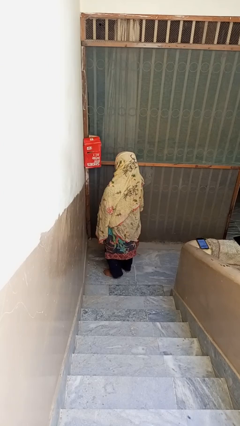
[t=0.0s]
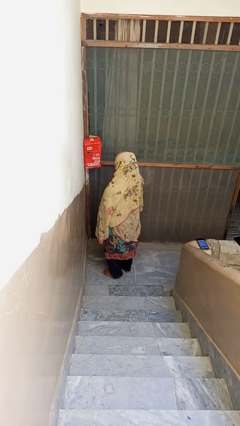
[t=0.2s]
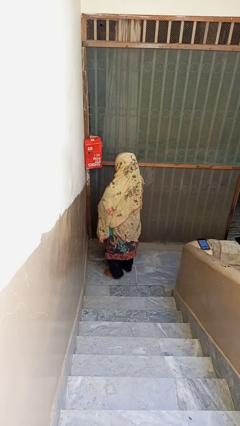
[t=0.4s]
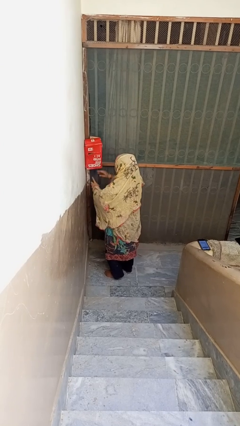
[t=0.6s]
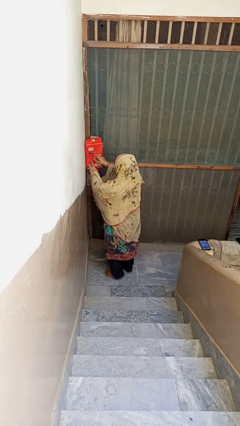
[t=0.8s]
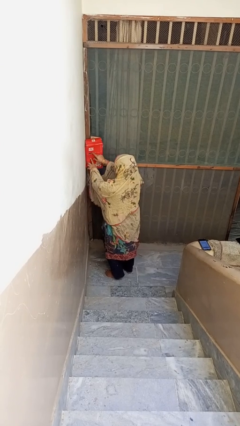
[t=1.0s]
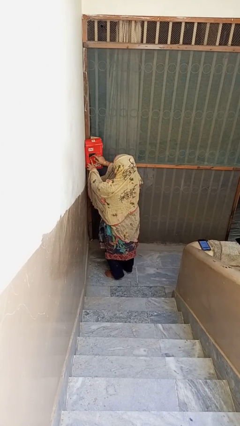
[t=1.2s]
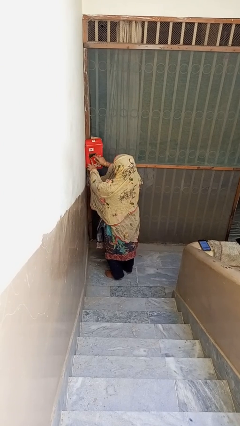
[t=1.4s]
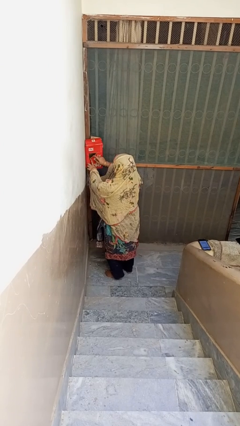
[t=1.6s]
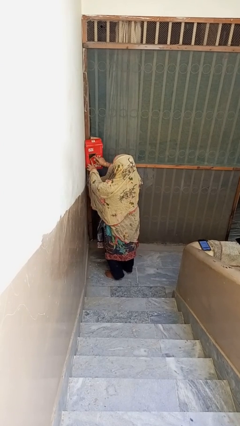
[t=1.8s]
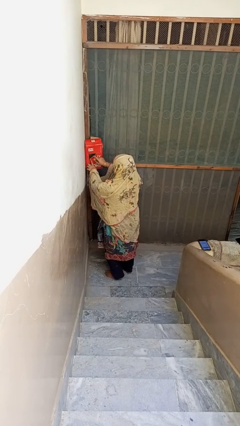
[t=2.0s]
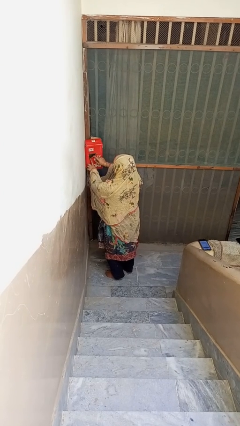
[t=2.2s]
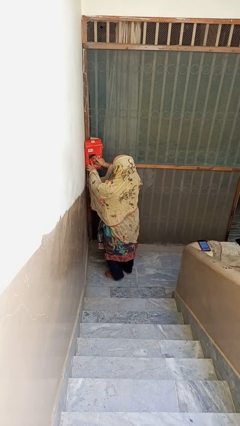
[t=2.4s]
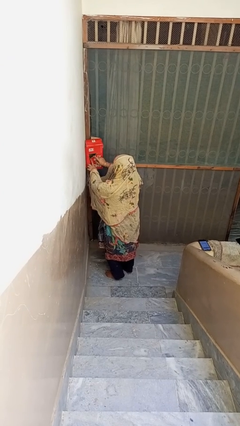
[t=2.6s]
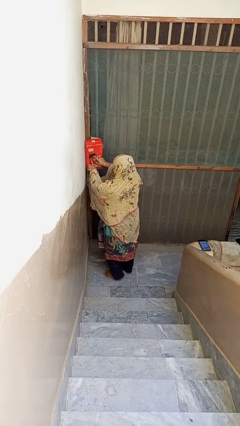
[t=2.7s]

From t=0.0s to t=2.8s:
person opens mailbox

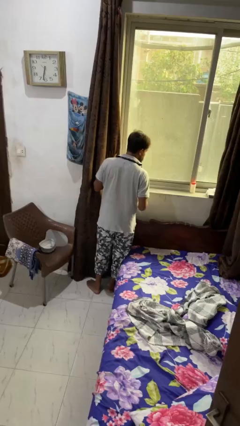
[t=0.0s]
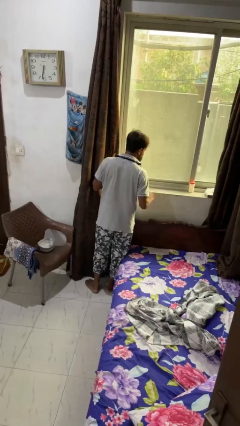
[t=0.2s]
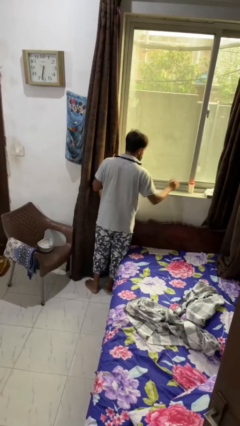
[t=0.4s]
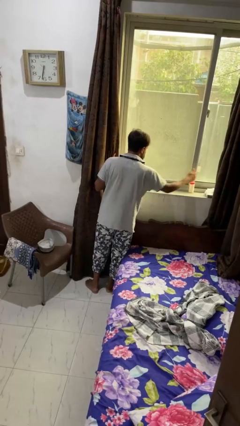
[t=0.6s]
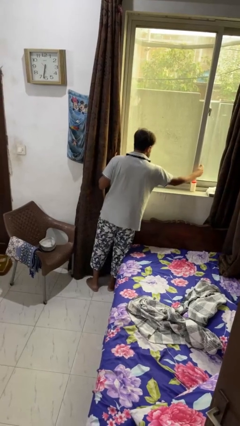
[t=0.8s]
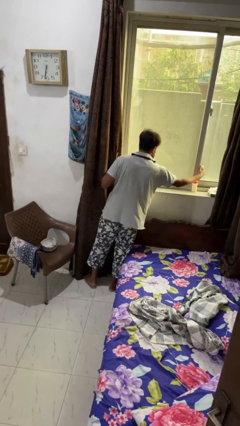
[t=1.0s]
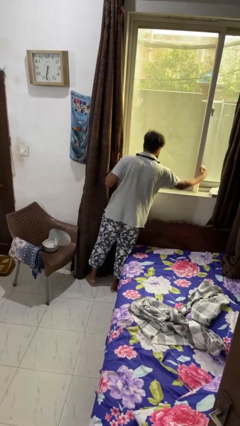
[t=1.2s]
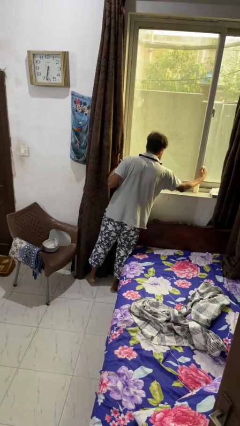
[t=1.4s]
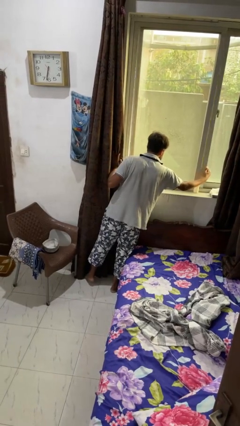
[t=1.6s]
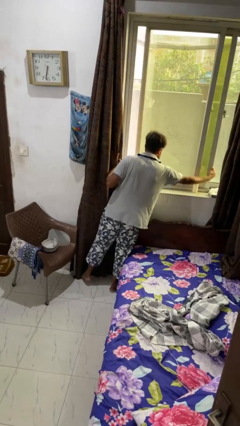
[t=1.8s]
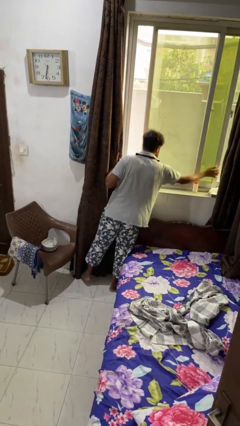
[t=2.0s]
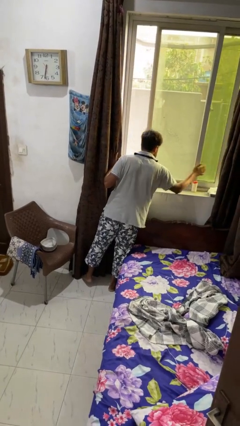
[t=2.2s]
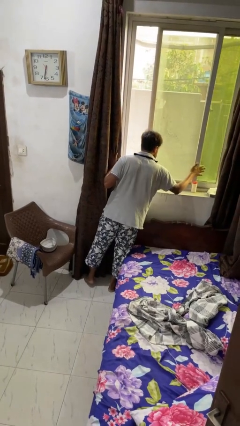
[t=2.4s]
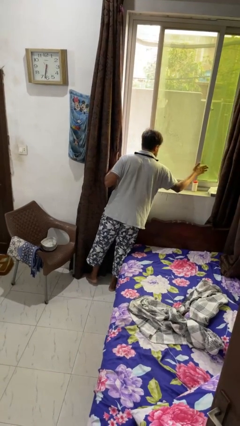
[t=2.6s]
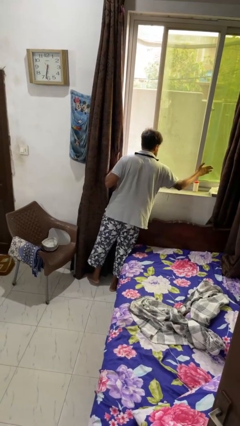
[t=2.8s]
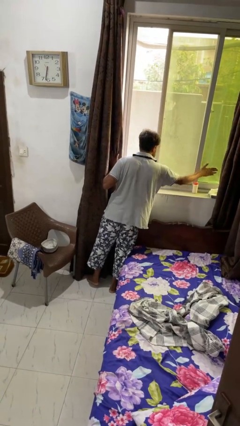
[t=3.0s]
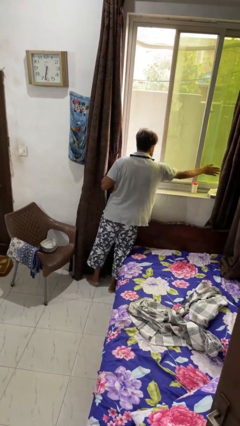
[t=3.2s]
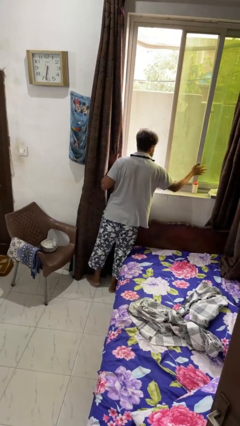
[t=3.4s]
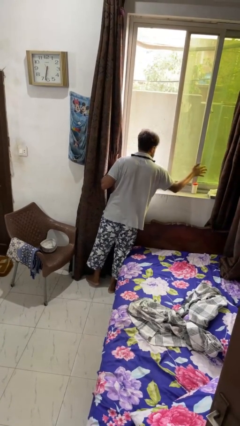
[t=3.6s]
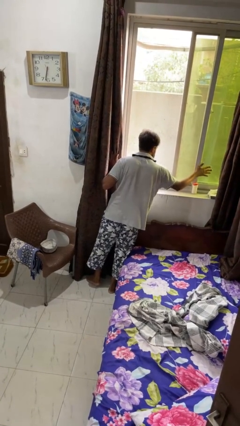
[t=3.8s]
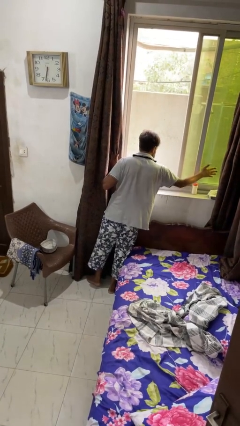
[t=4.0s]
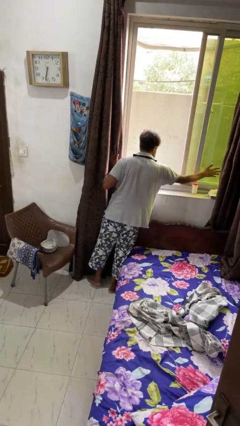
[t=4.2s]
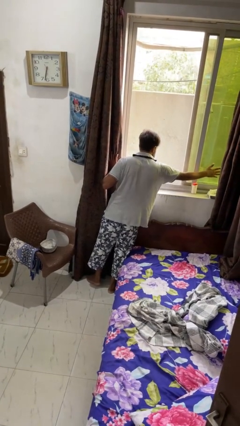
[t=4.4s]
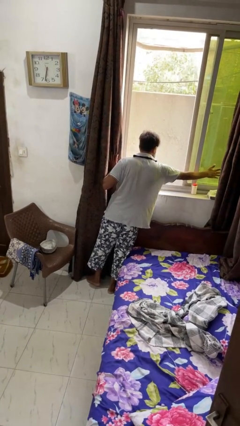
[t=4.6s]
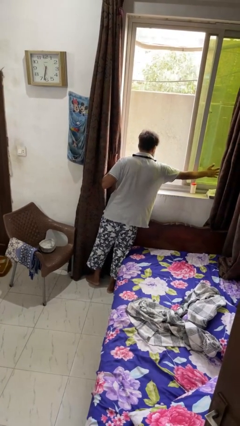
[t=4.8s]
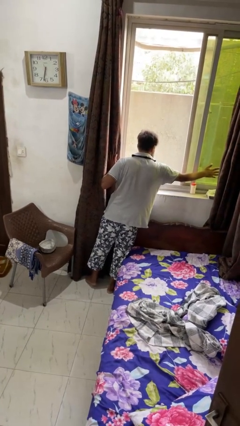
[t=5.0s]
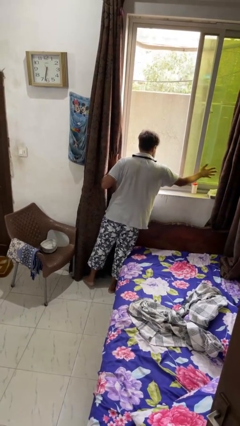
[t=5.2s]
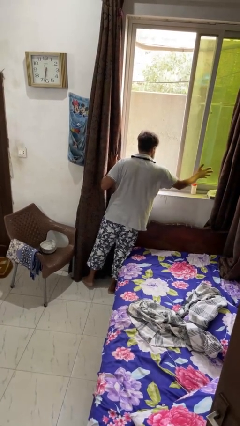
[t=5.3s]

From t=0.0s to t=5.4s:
person opens home window

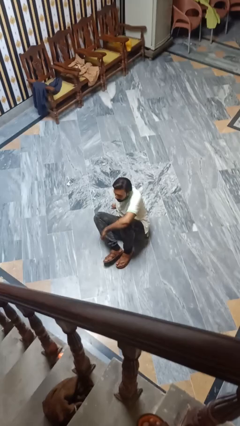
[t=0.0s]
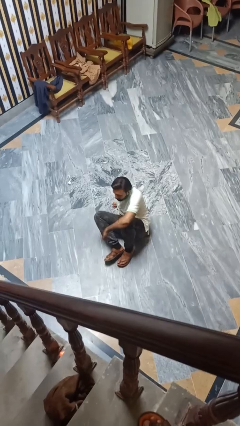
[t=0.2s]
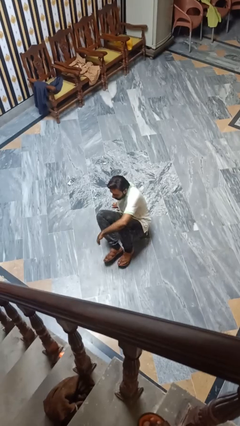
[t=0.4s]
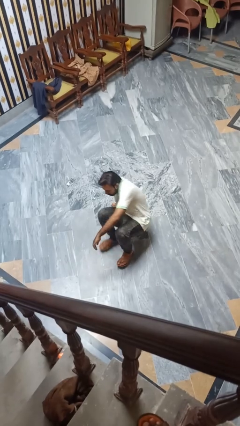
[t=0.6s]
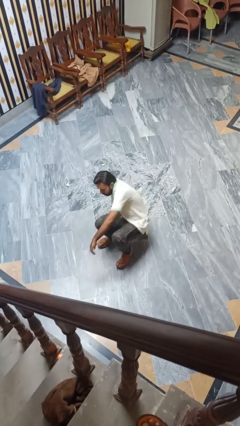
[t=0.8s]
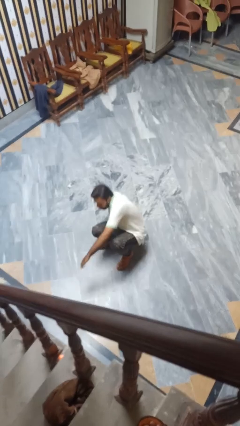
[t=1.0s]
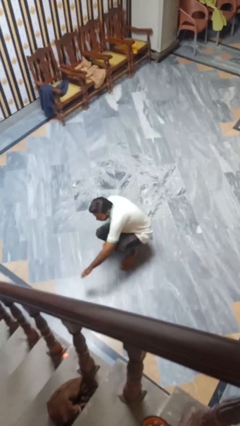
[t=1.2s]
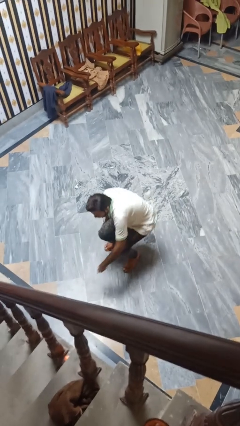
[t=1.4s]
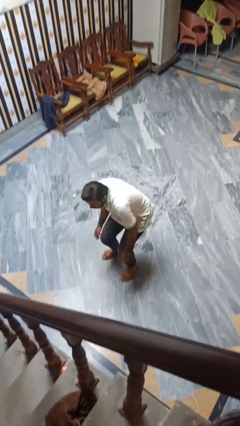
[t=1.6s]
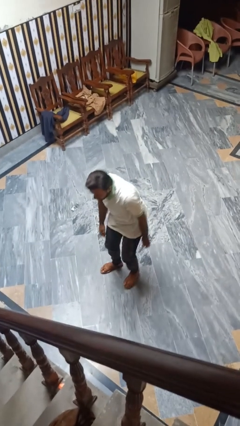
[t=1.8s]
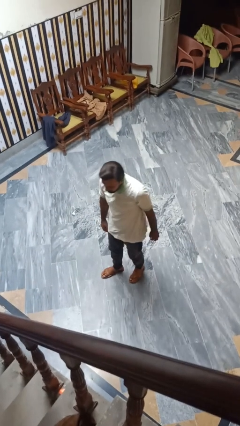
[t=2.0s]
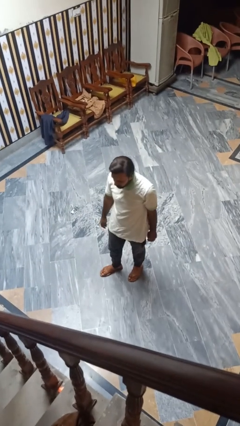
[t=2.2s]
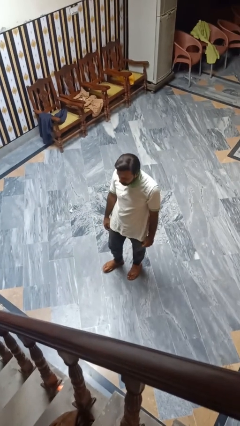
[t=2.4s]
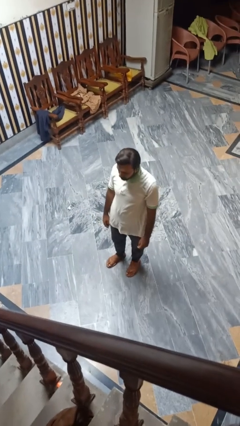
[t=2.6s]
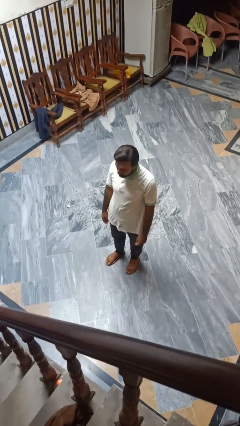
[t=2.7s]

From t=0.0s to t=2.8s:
person stands up from floor

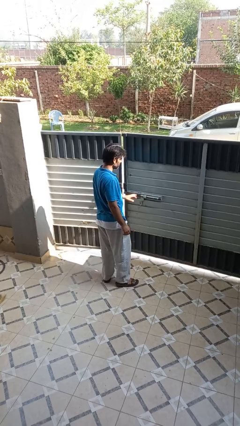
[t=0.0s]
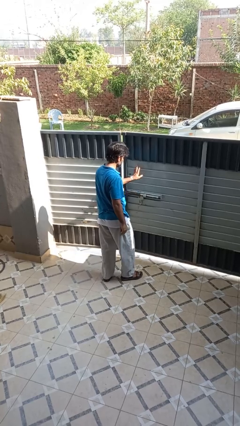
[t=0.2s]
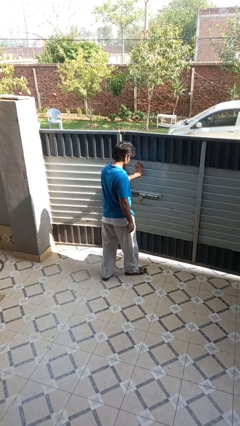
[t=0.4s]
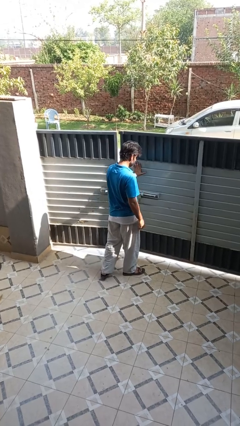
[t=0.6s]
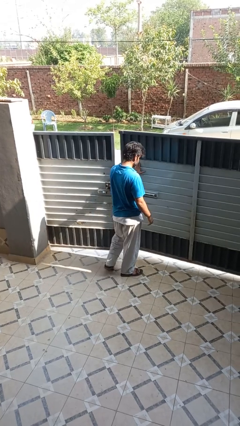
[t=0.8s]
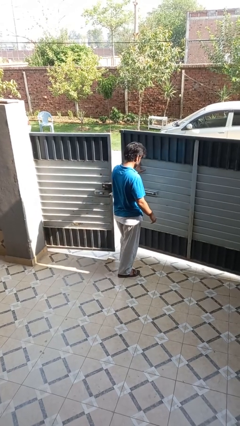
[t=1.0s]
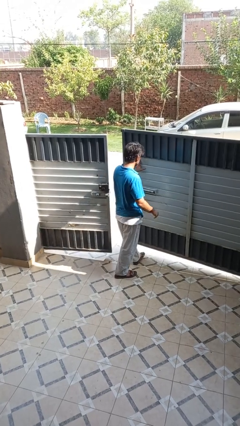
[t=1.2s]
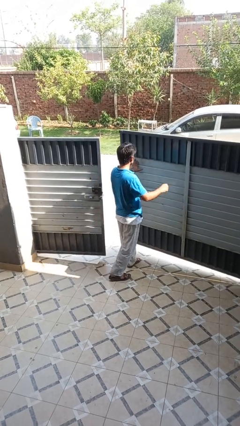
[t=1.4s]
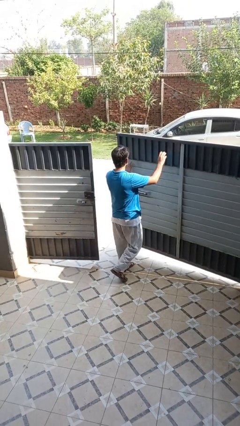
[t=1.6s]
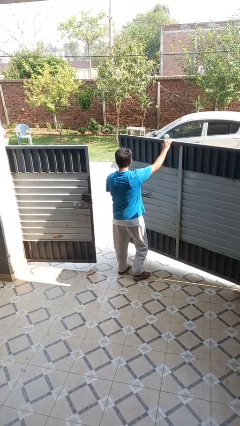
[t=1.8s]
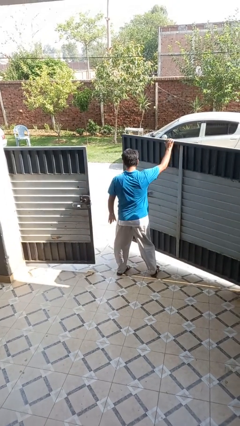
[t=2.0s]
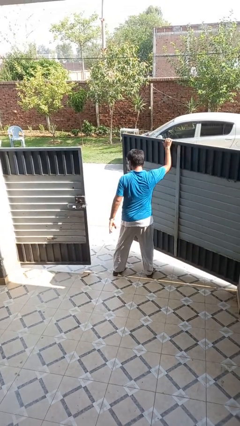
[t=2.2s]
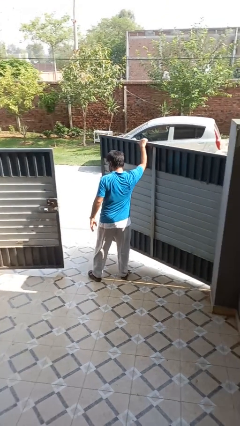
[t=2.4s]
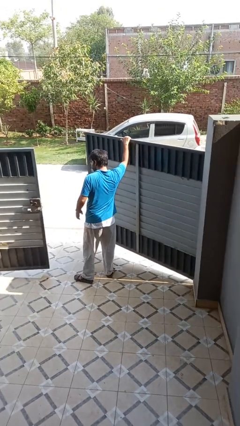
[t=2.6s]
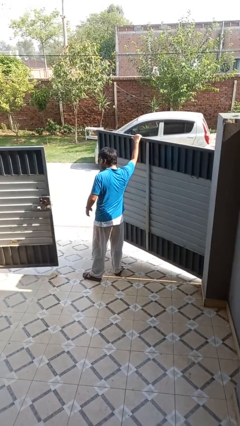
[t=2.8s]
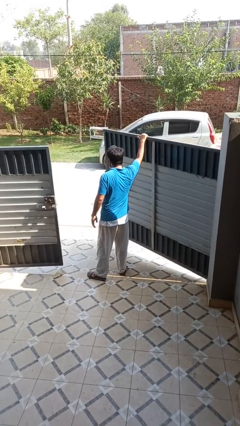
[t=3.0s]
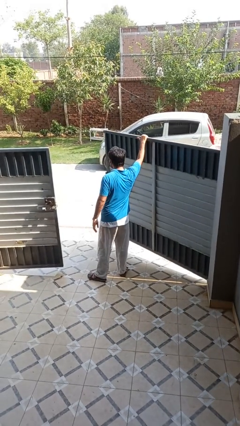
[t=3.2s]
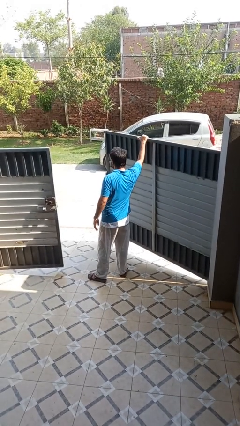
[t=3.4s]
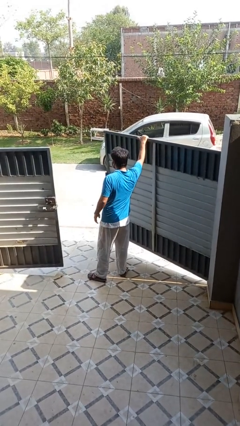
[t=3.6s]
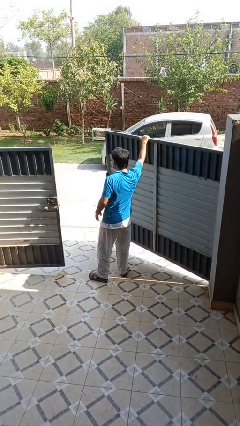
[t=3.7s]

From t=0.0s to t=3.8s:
person opens gate

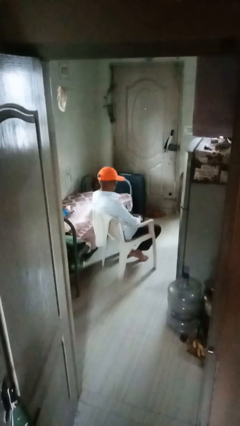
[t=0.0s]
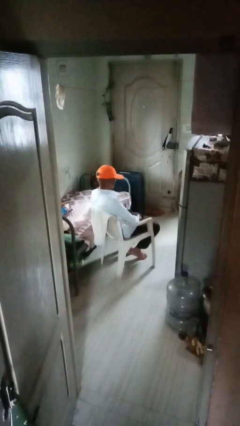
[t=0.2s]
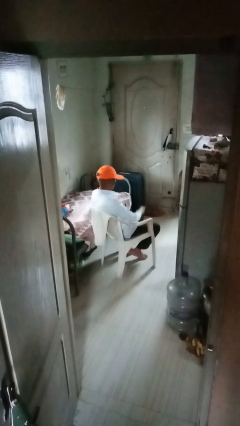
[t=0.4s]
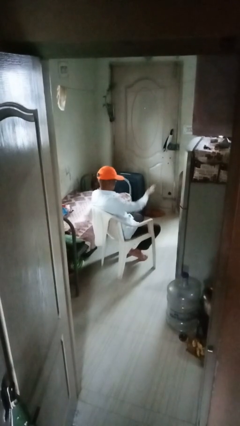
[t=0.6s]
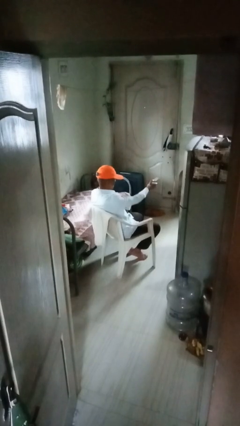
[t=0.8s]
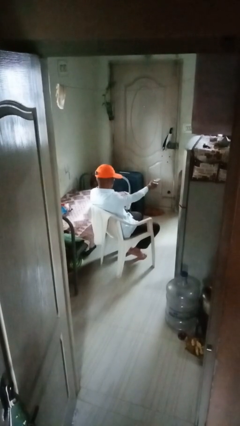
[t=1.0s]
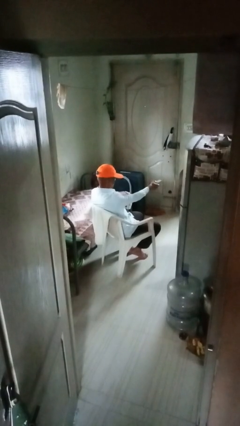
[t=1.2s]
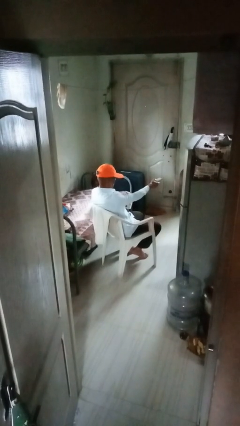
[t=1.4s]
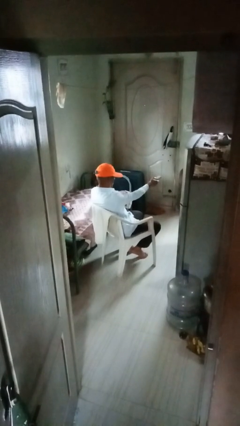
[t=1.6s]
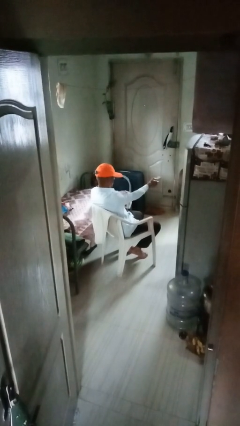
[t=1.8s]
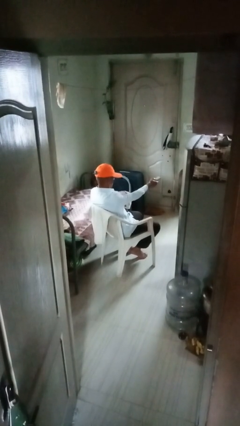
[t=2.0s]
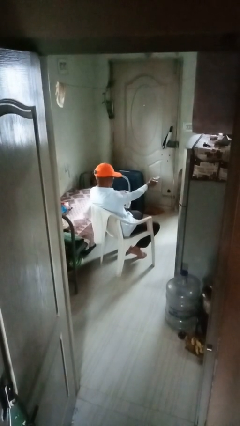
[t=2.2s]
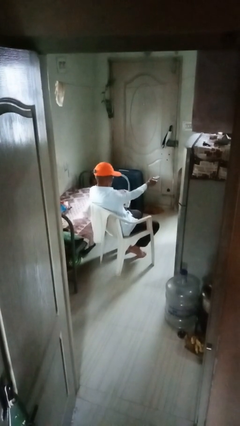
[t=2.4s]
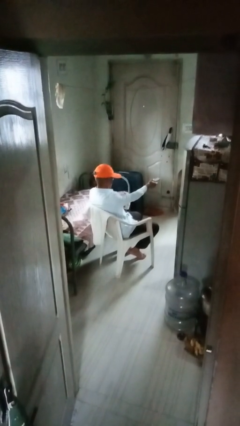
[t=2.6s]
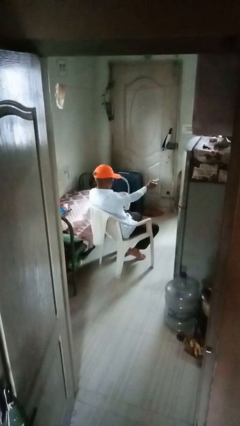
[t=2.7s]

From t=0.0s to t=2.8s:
person uses television remote
